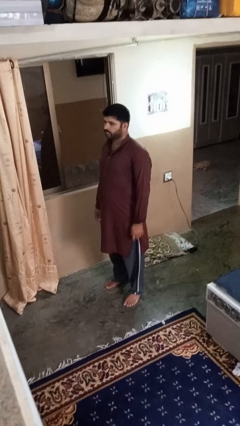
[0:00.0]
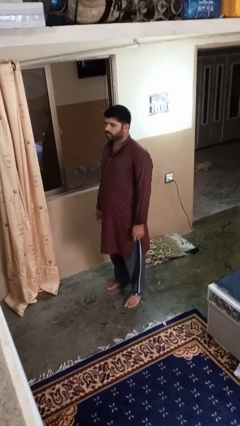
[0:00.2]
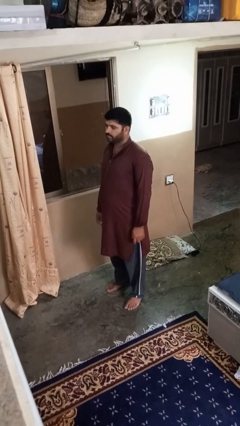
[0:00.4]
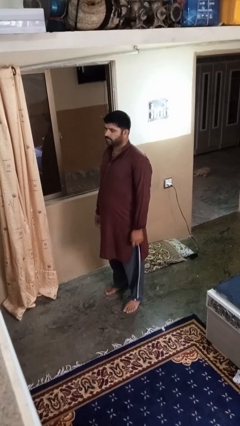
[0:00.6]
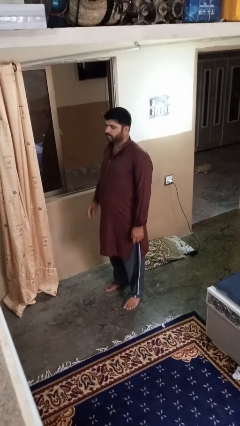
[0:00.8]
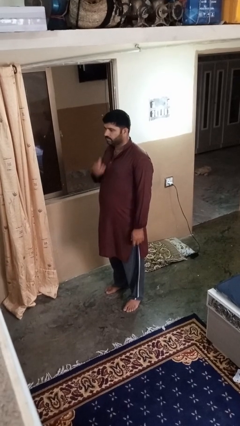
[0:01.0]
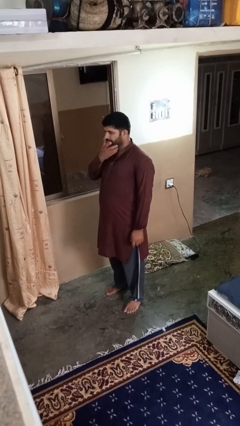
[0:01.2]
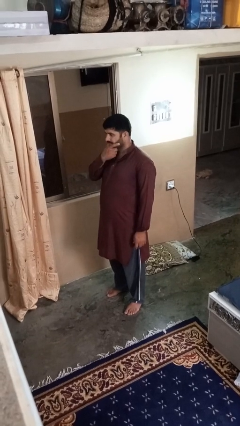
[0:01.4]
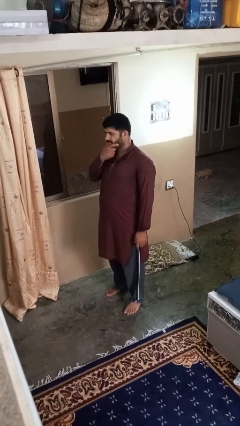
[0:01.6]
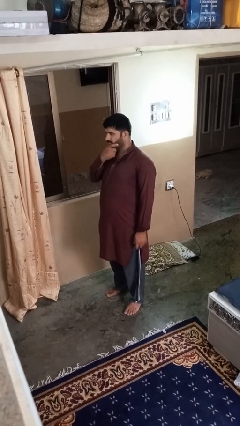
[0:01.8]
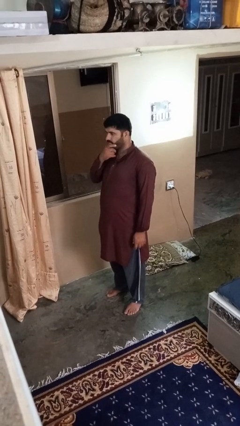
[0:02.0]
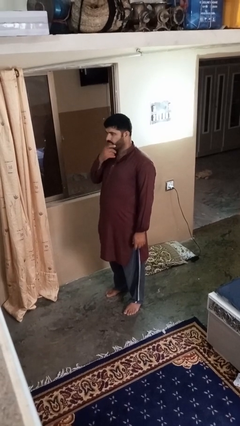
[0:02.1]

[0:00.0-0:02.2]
person strokes chin

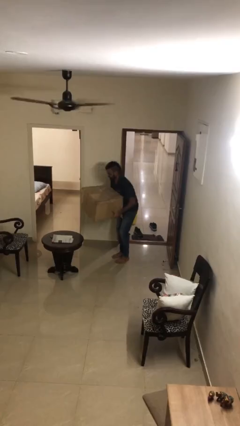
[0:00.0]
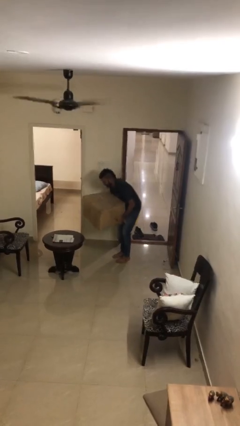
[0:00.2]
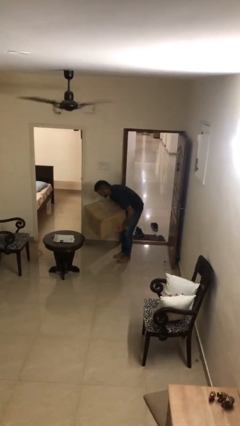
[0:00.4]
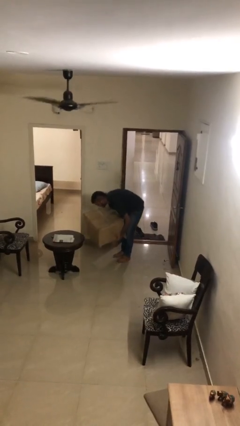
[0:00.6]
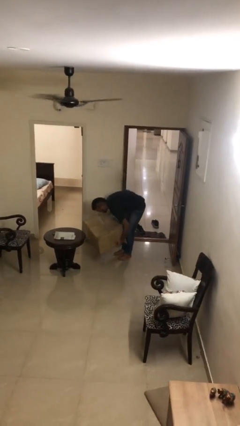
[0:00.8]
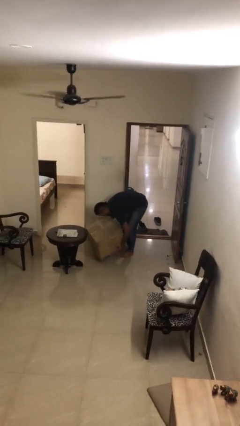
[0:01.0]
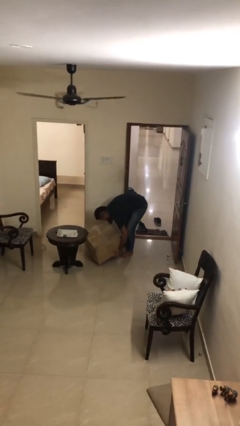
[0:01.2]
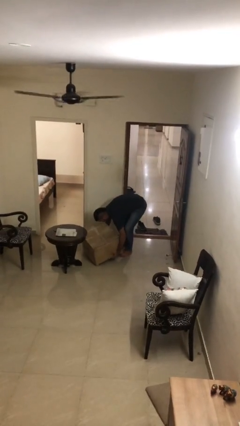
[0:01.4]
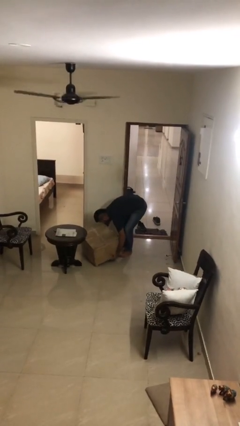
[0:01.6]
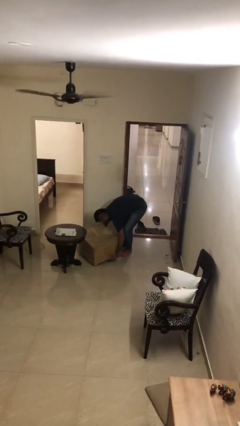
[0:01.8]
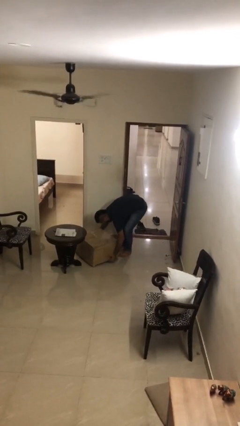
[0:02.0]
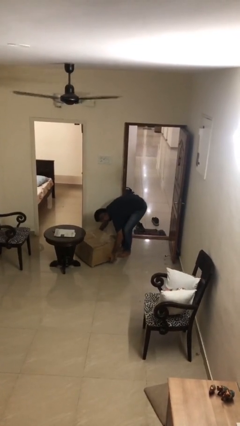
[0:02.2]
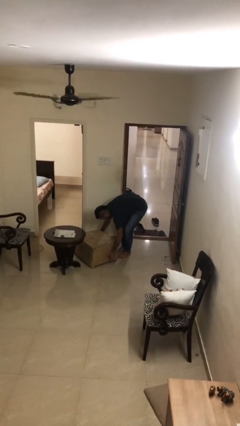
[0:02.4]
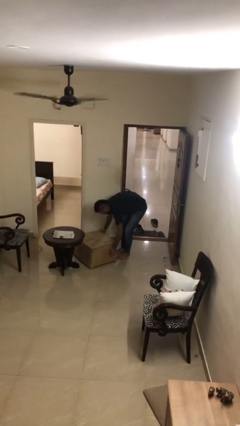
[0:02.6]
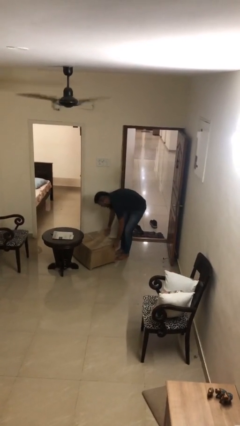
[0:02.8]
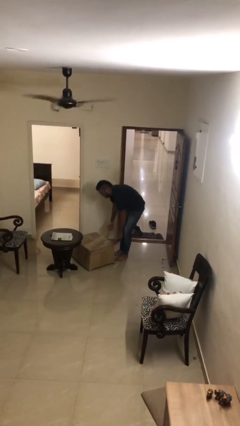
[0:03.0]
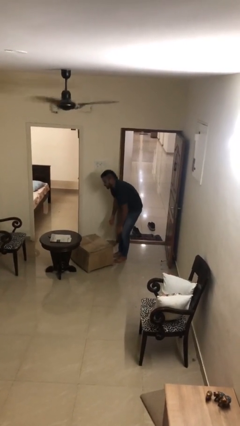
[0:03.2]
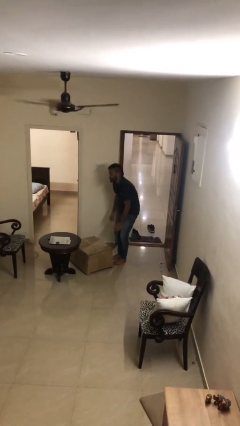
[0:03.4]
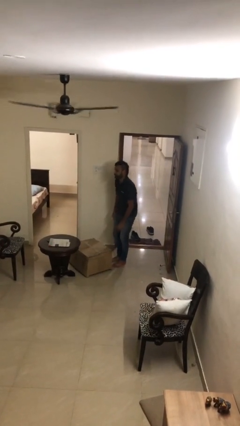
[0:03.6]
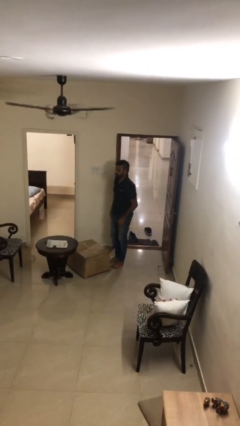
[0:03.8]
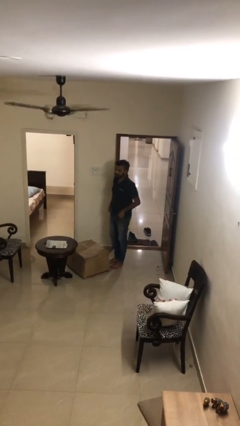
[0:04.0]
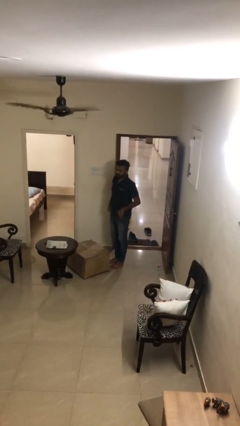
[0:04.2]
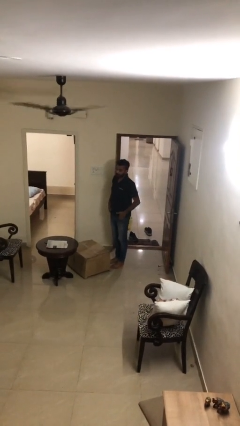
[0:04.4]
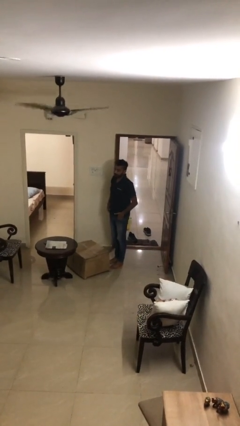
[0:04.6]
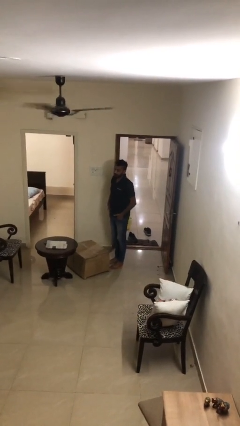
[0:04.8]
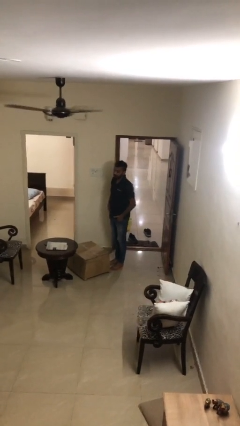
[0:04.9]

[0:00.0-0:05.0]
person puts down object on floor

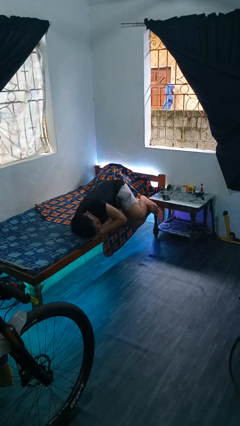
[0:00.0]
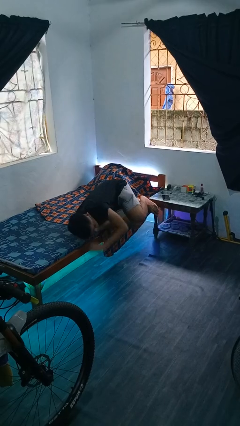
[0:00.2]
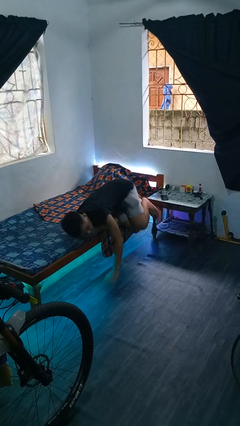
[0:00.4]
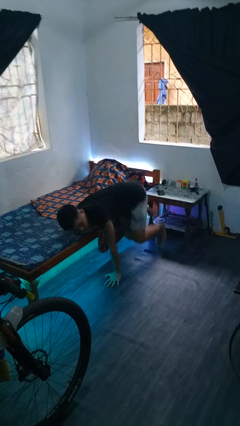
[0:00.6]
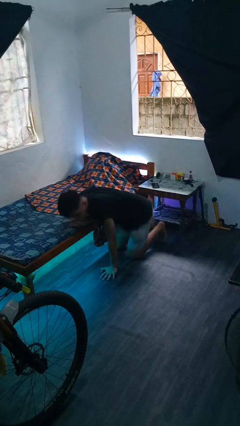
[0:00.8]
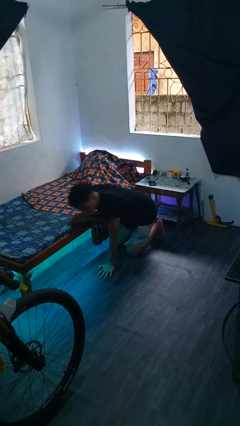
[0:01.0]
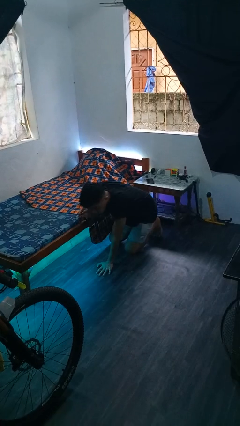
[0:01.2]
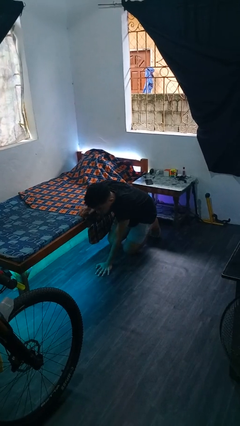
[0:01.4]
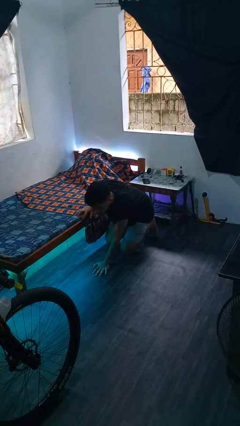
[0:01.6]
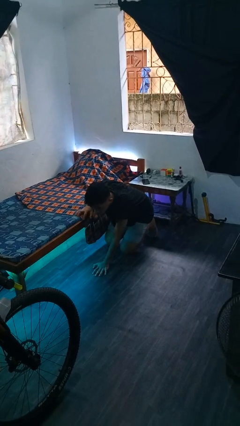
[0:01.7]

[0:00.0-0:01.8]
person falls from bed

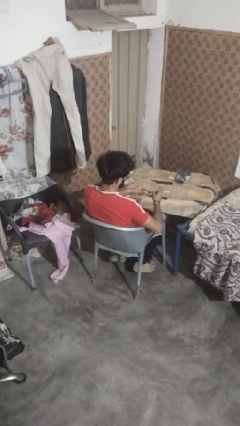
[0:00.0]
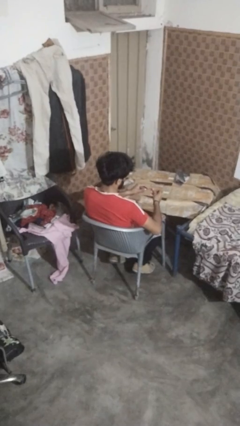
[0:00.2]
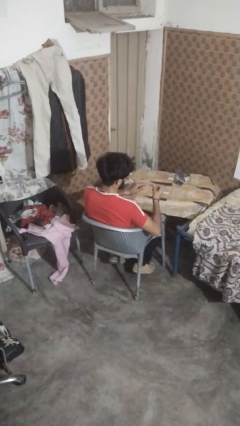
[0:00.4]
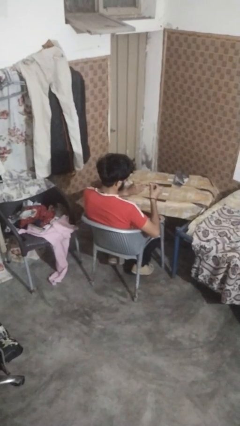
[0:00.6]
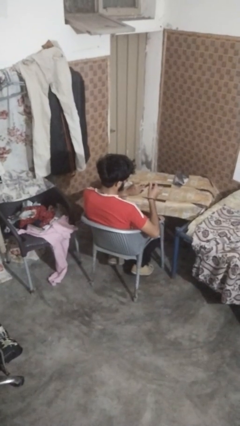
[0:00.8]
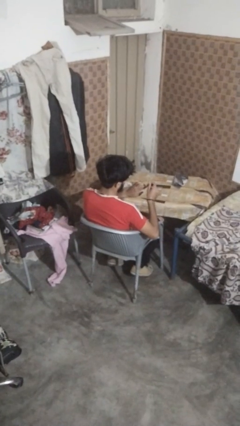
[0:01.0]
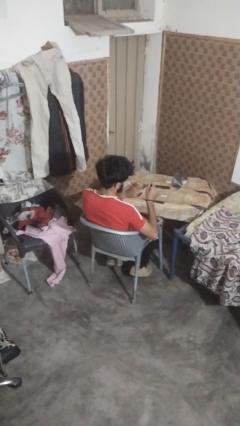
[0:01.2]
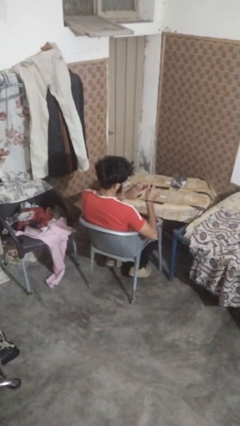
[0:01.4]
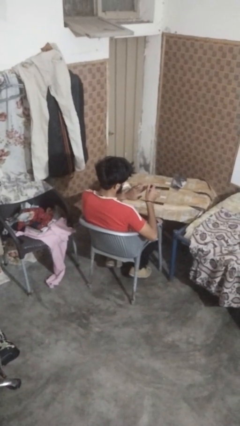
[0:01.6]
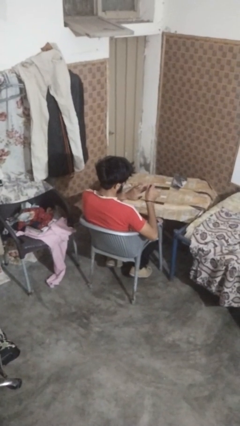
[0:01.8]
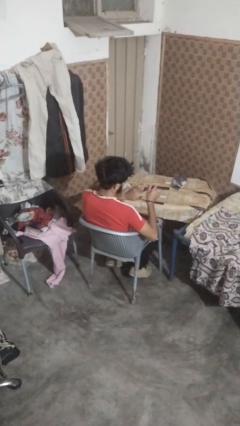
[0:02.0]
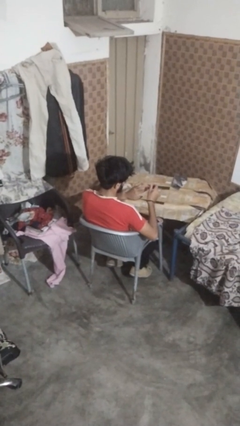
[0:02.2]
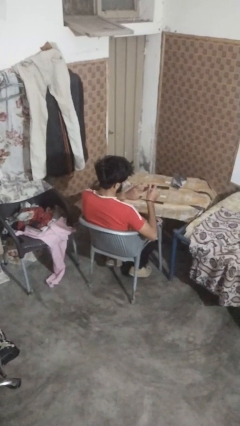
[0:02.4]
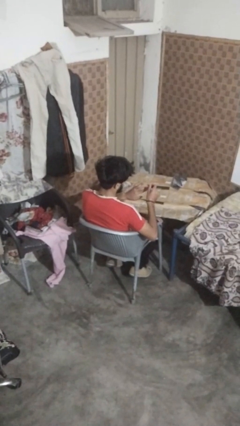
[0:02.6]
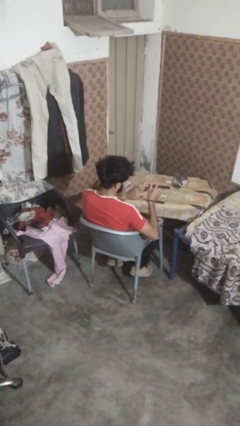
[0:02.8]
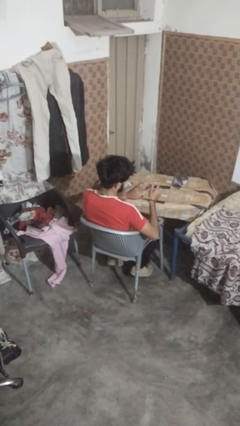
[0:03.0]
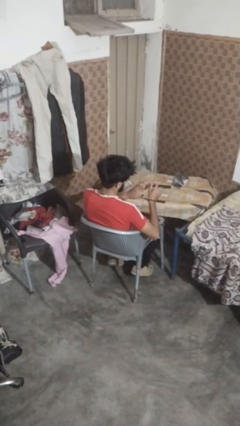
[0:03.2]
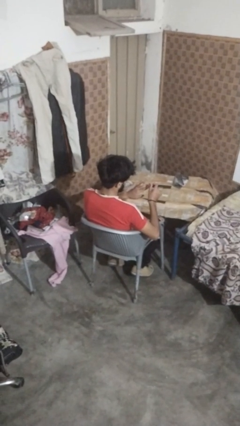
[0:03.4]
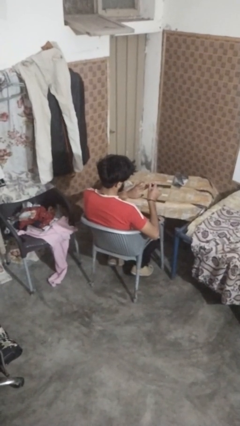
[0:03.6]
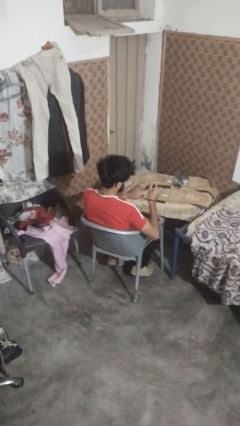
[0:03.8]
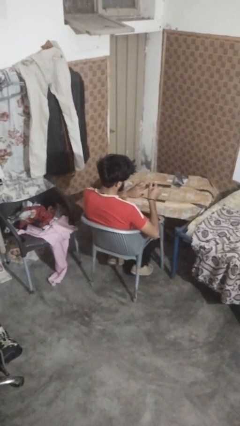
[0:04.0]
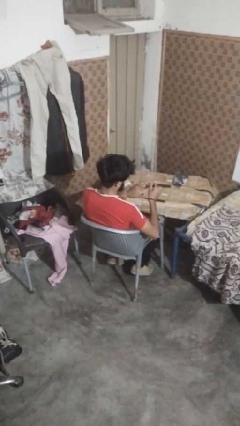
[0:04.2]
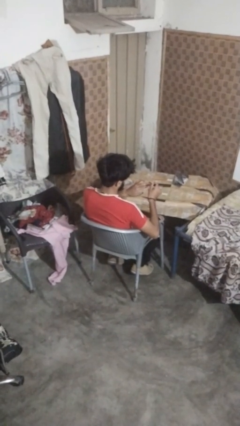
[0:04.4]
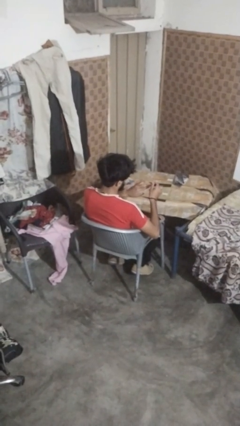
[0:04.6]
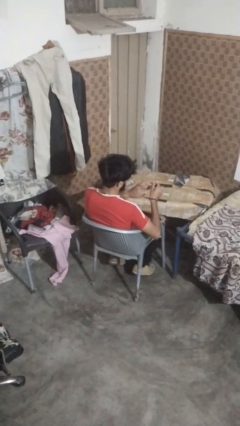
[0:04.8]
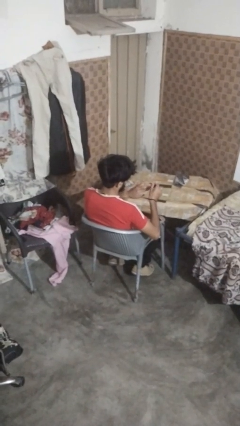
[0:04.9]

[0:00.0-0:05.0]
person clips fingernails

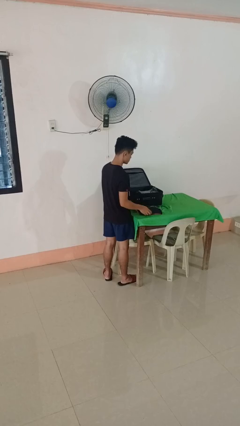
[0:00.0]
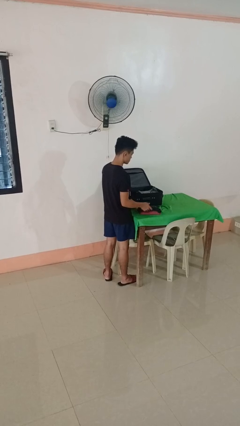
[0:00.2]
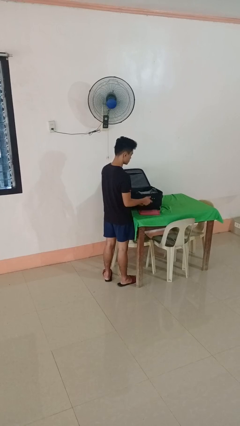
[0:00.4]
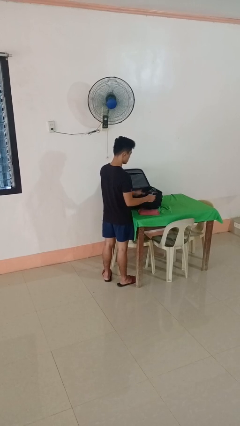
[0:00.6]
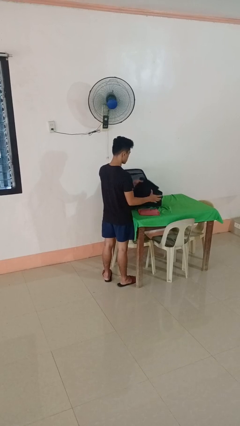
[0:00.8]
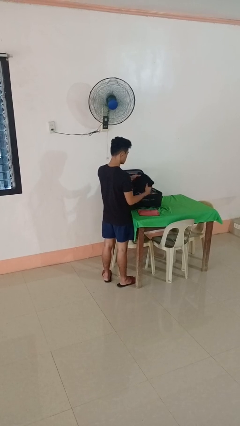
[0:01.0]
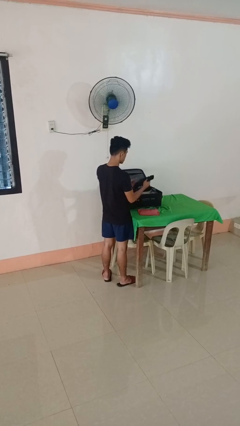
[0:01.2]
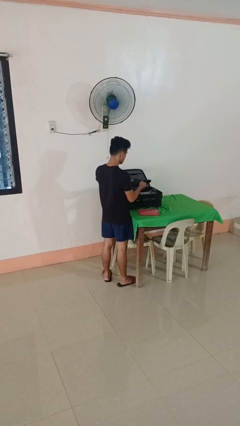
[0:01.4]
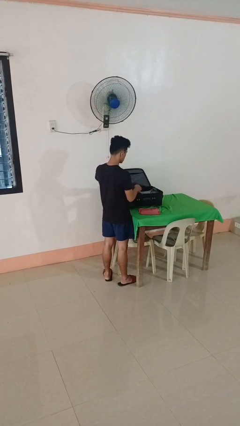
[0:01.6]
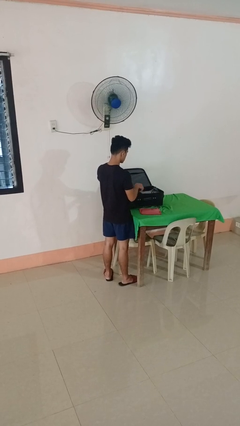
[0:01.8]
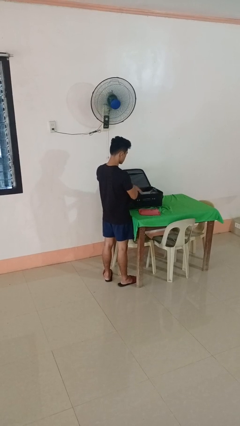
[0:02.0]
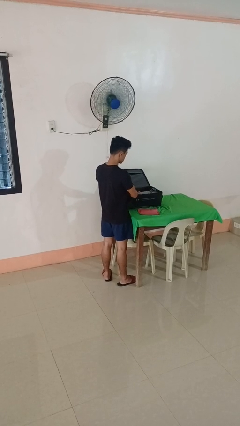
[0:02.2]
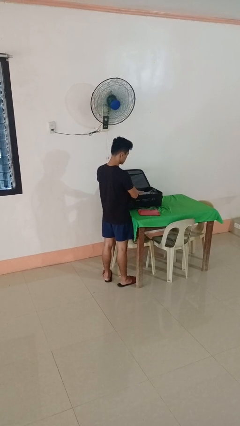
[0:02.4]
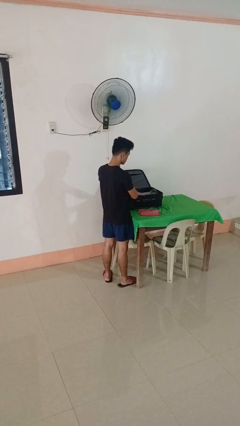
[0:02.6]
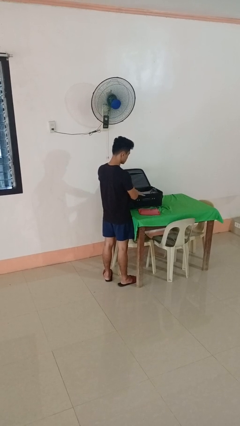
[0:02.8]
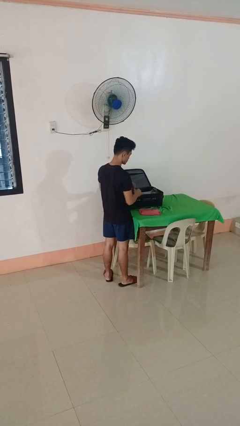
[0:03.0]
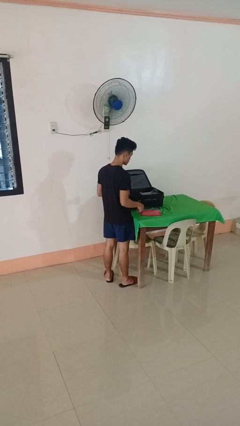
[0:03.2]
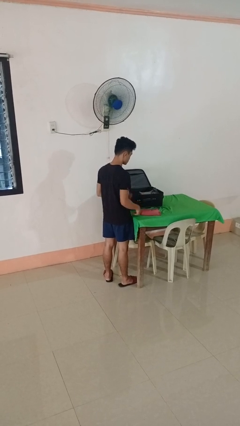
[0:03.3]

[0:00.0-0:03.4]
person loads clothes into suitcase
